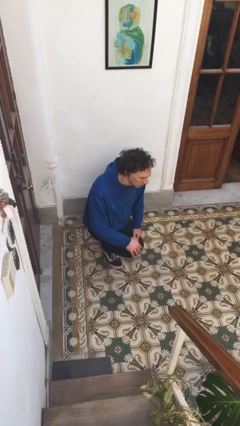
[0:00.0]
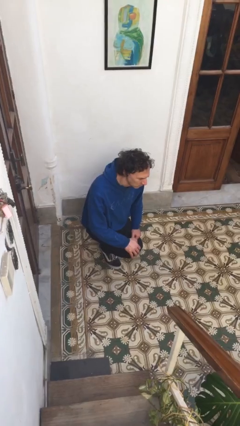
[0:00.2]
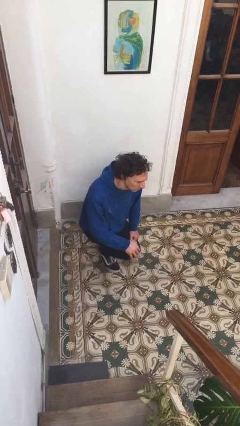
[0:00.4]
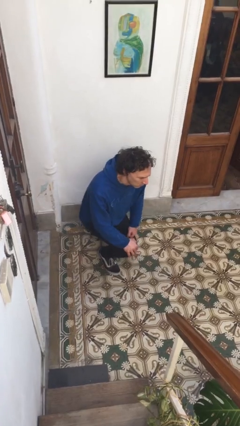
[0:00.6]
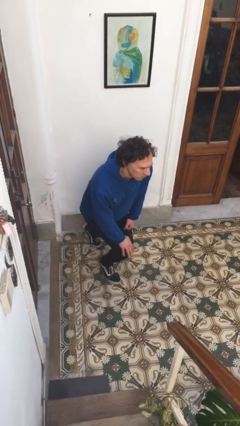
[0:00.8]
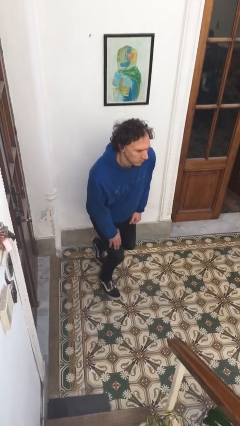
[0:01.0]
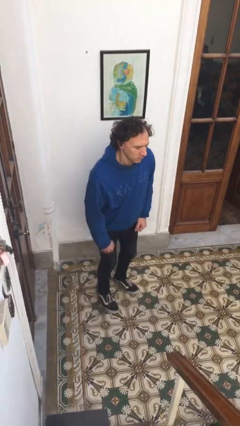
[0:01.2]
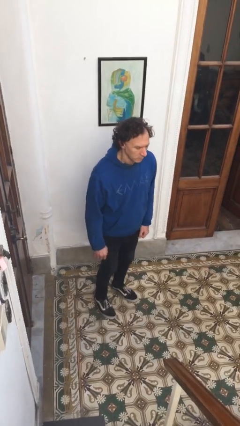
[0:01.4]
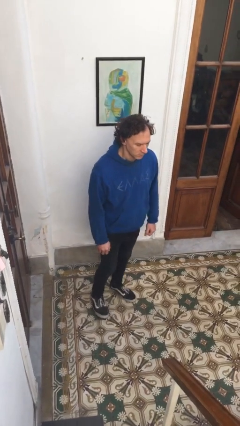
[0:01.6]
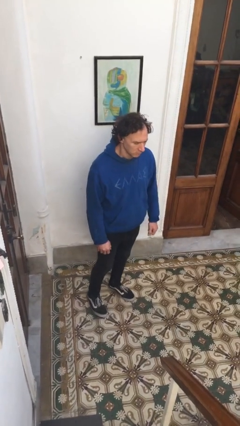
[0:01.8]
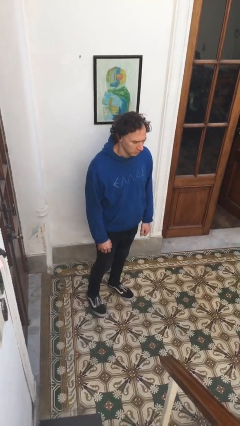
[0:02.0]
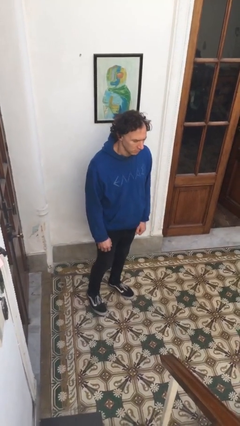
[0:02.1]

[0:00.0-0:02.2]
person stands up from floor

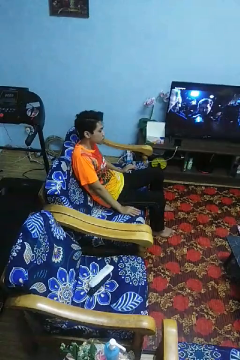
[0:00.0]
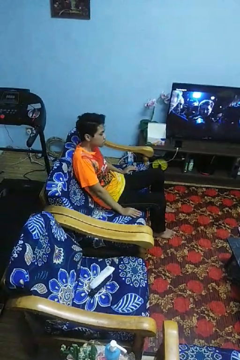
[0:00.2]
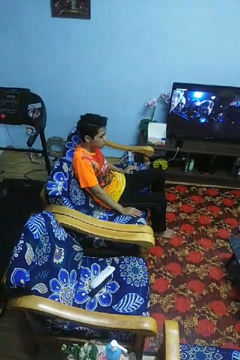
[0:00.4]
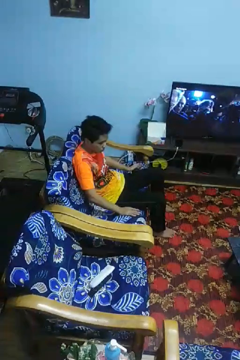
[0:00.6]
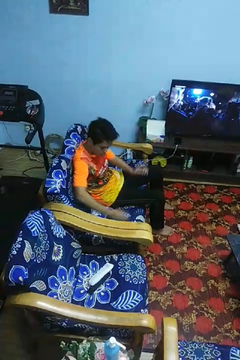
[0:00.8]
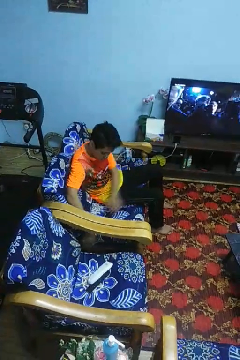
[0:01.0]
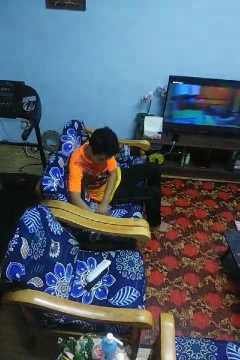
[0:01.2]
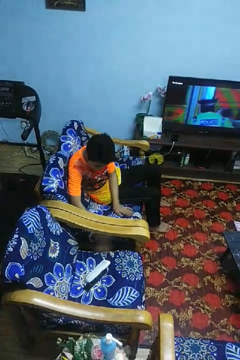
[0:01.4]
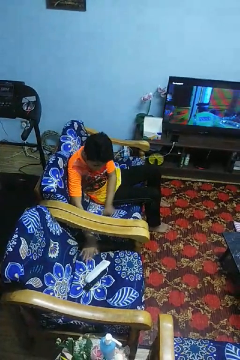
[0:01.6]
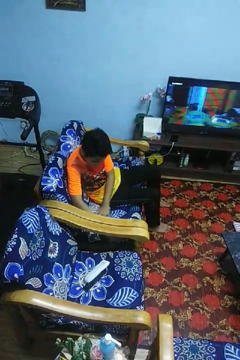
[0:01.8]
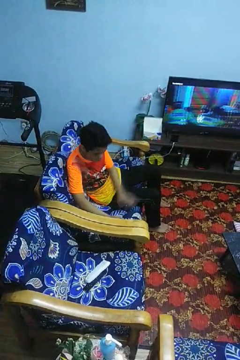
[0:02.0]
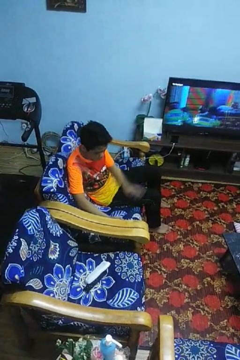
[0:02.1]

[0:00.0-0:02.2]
person searches in couch

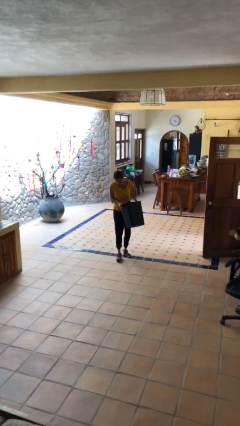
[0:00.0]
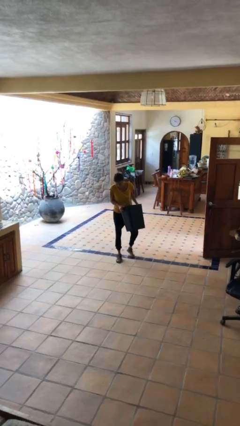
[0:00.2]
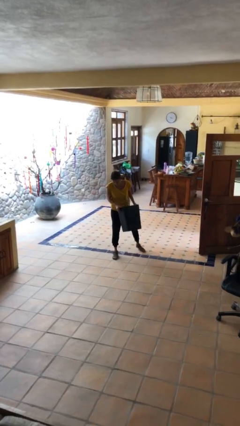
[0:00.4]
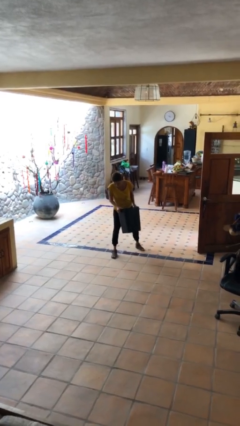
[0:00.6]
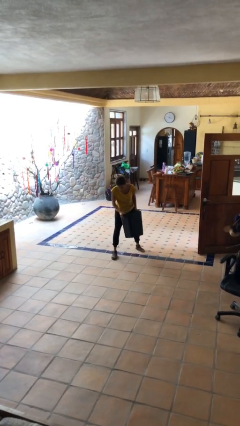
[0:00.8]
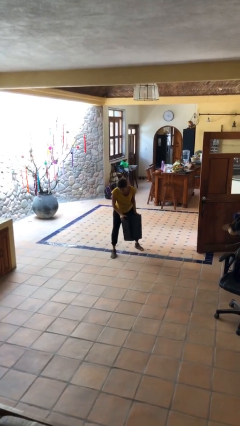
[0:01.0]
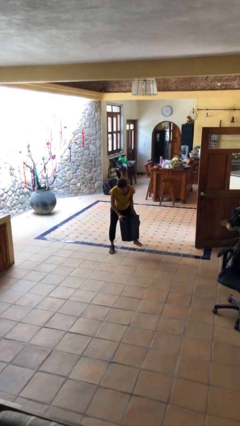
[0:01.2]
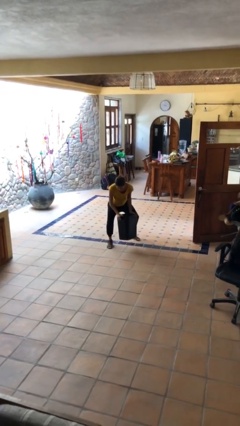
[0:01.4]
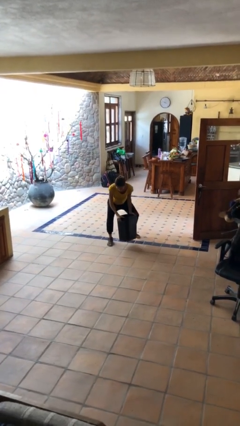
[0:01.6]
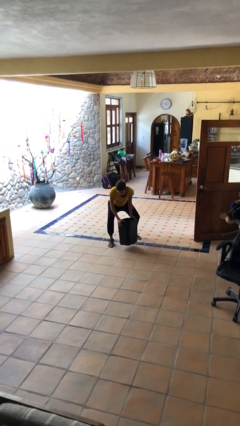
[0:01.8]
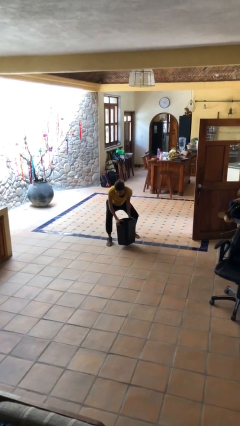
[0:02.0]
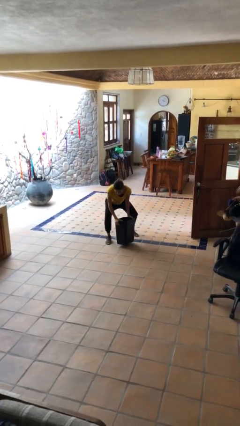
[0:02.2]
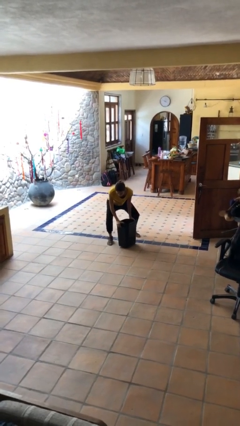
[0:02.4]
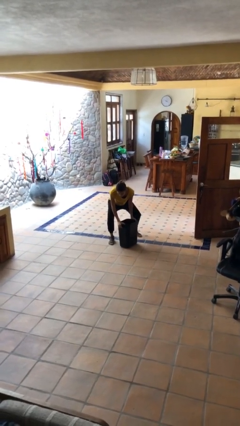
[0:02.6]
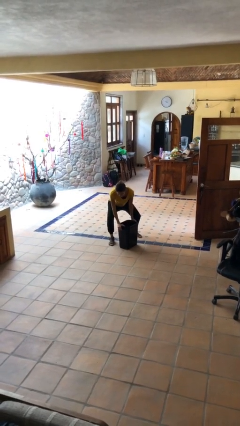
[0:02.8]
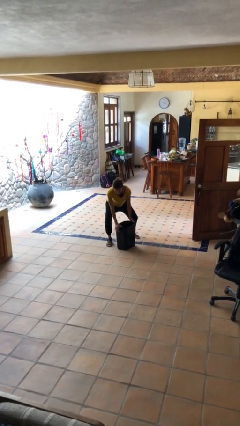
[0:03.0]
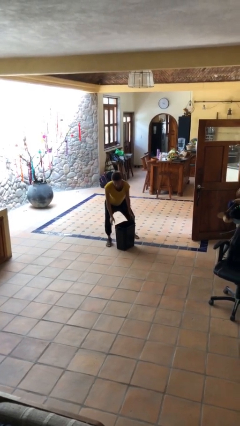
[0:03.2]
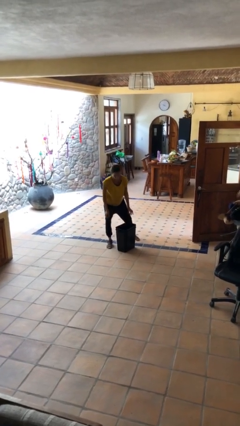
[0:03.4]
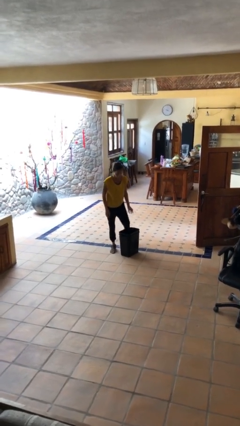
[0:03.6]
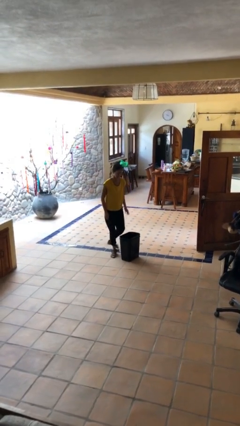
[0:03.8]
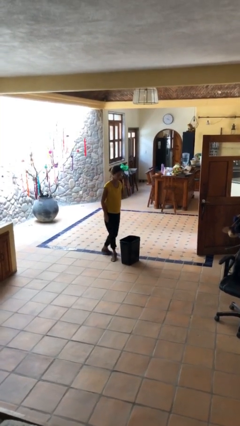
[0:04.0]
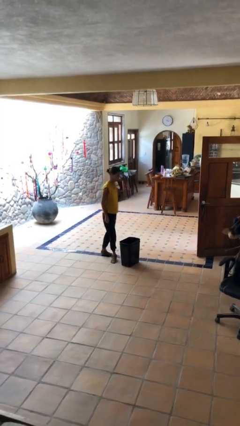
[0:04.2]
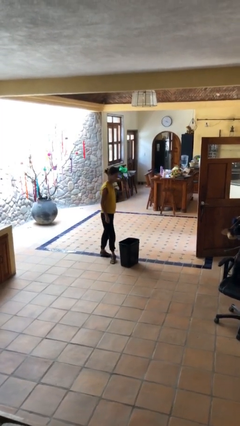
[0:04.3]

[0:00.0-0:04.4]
person puts down object on floor

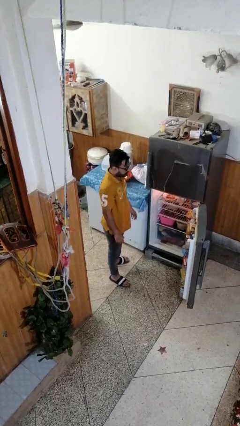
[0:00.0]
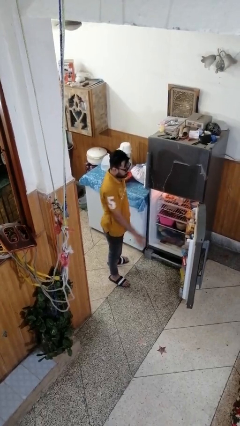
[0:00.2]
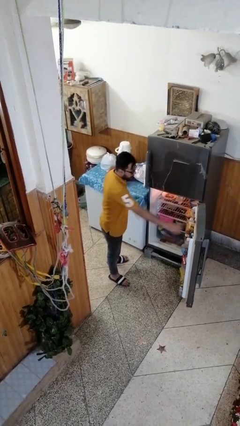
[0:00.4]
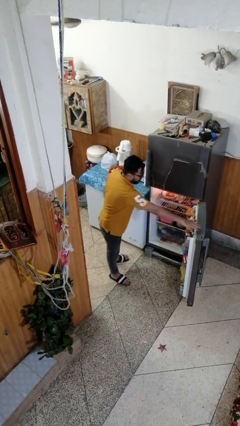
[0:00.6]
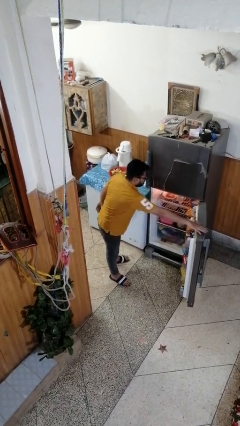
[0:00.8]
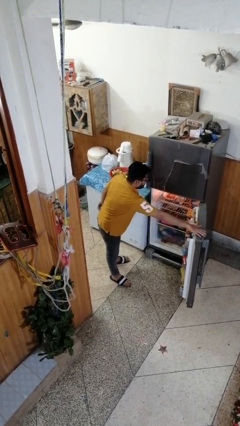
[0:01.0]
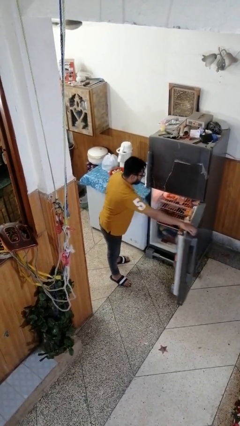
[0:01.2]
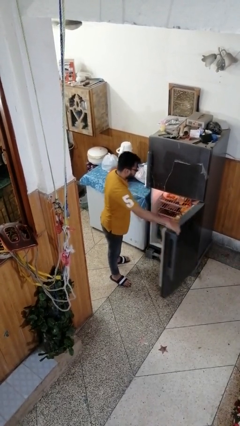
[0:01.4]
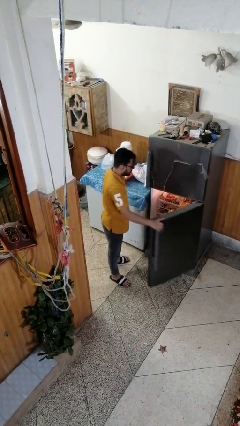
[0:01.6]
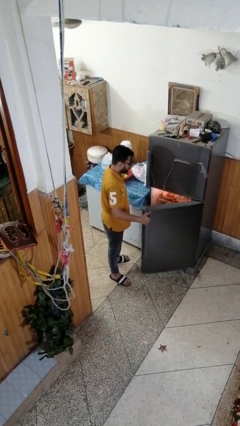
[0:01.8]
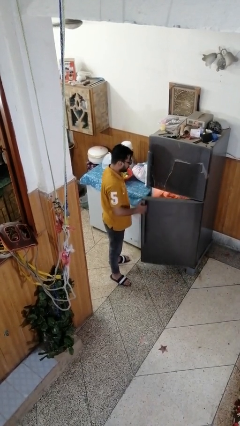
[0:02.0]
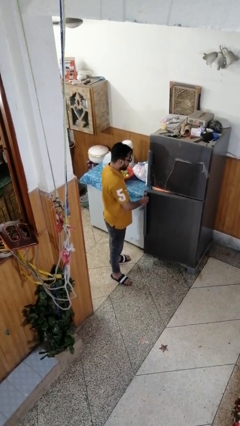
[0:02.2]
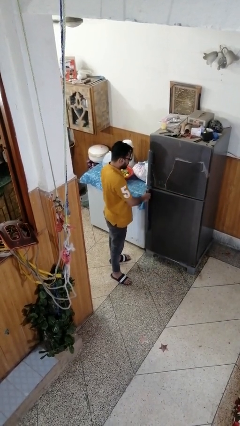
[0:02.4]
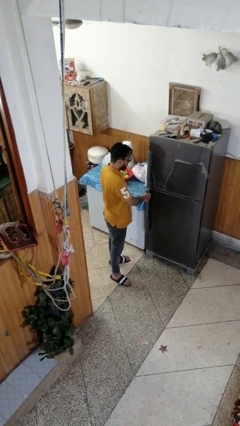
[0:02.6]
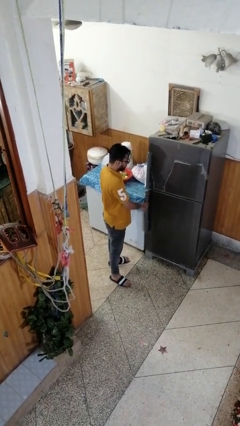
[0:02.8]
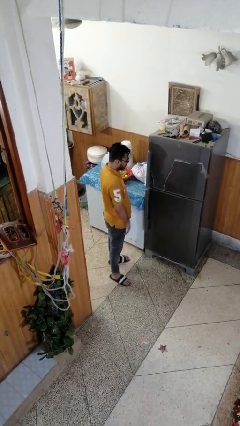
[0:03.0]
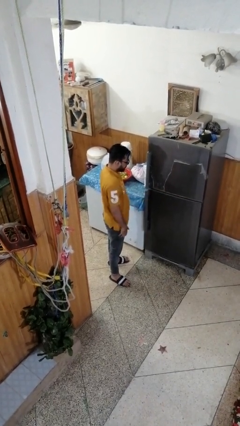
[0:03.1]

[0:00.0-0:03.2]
person closes refrigerator

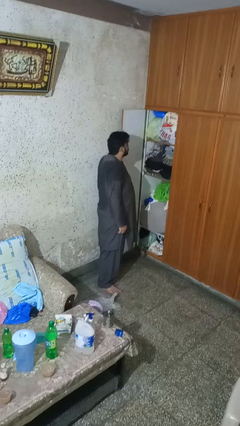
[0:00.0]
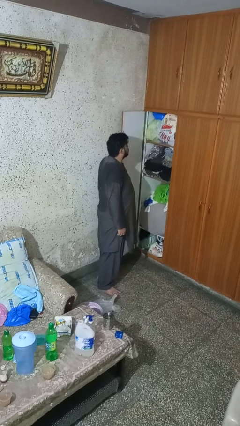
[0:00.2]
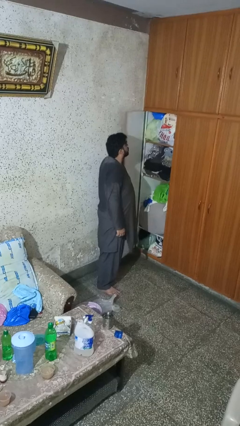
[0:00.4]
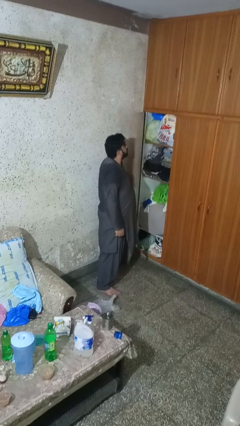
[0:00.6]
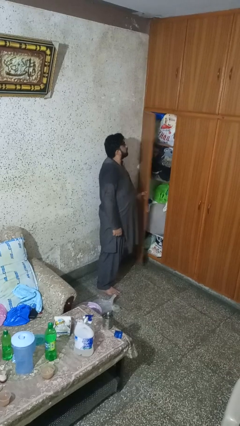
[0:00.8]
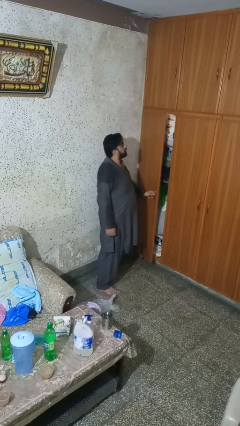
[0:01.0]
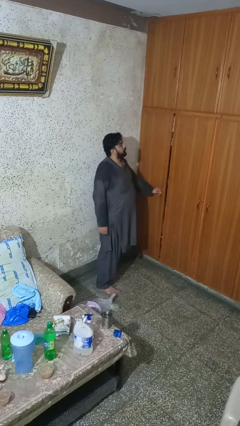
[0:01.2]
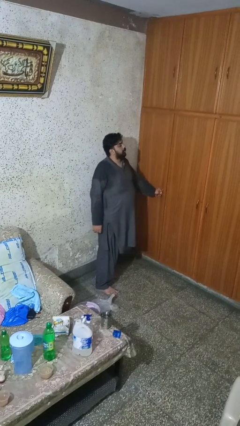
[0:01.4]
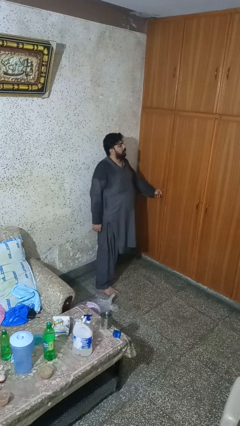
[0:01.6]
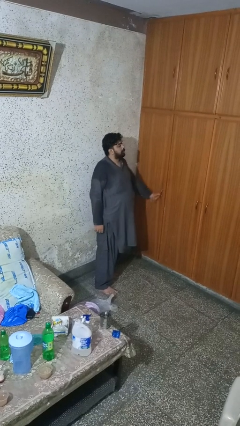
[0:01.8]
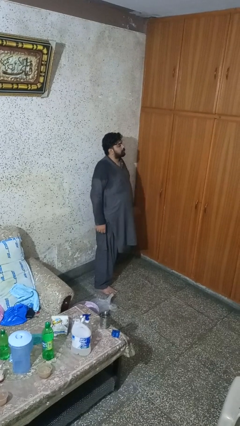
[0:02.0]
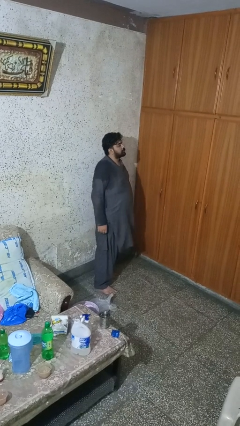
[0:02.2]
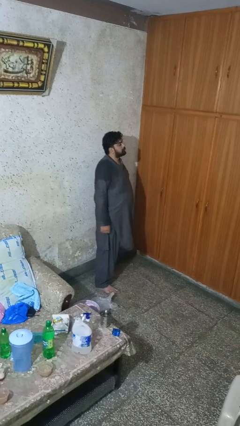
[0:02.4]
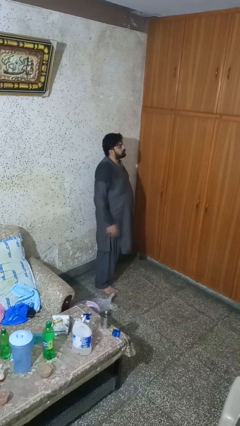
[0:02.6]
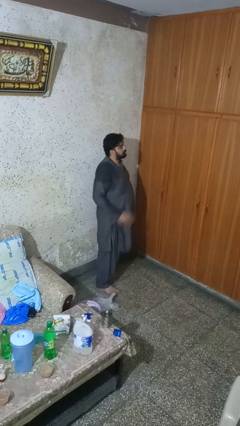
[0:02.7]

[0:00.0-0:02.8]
person closes closet door

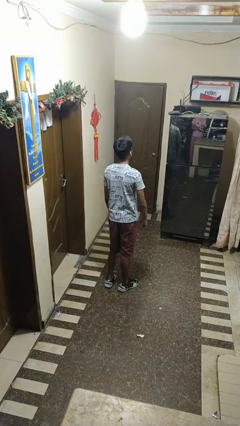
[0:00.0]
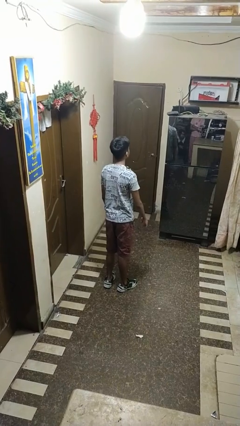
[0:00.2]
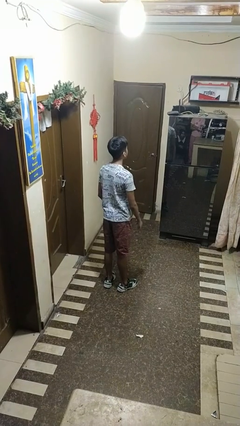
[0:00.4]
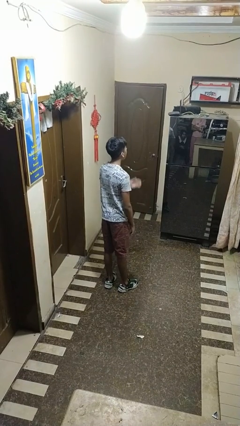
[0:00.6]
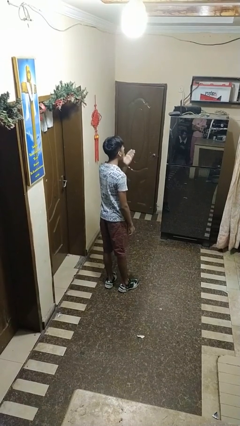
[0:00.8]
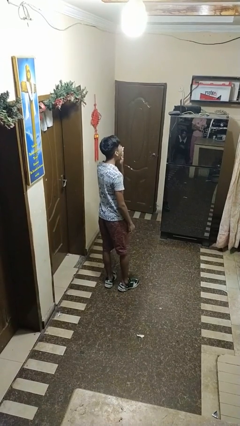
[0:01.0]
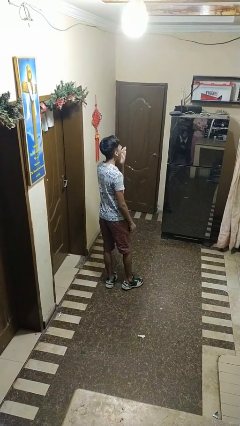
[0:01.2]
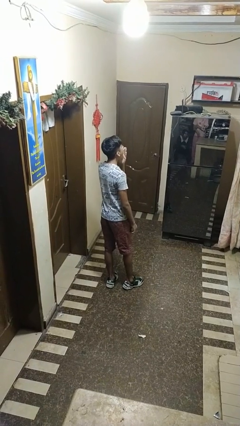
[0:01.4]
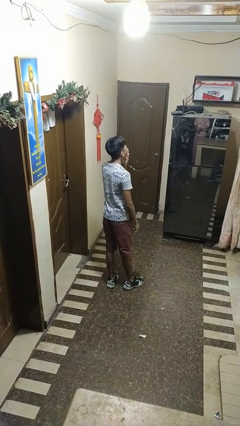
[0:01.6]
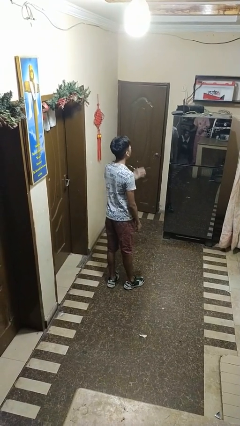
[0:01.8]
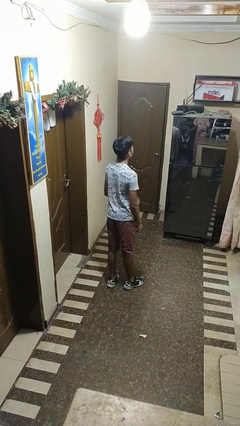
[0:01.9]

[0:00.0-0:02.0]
person yawns

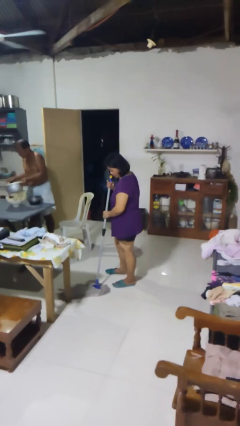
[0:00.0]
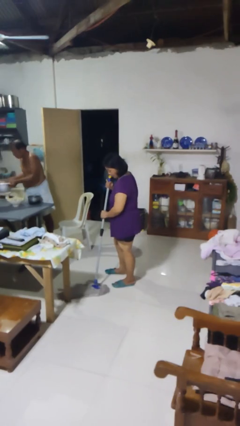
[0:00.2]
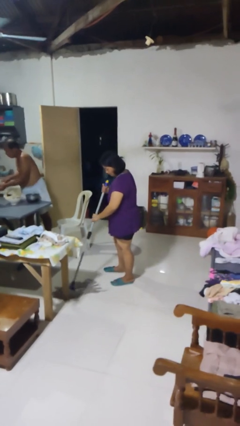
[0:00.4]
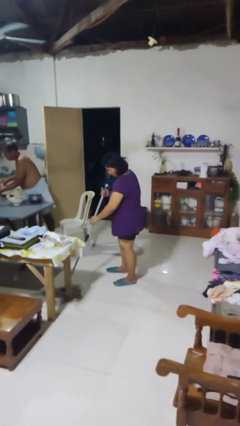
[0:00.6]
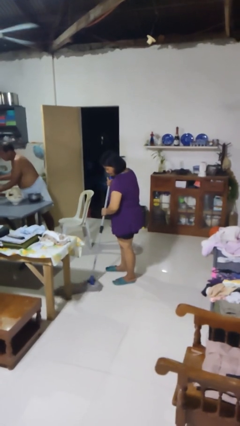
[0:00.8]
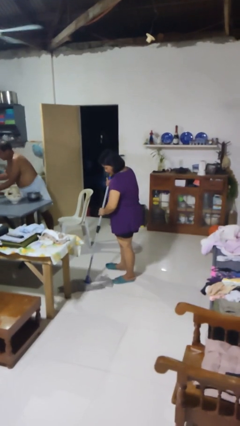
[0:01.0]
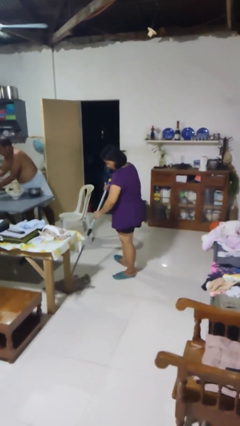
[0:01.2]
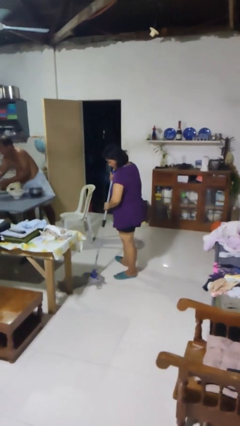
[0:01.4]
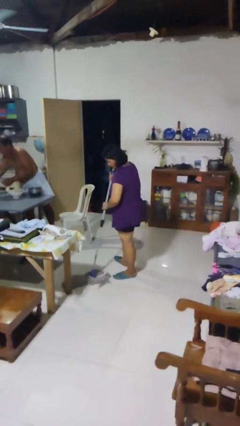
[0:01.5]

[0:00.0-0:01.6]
person mops
